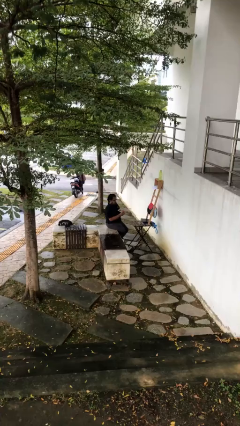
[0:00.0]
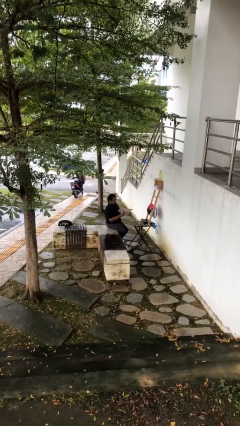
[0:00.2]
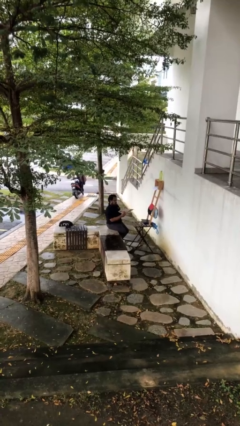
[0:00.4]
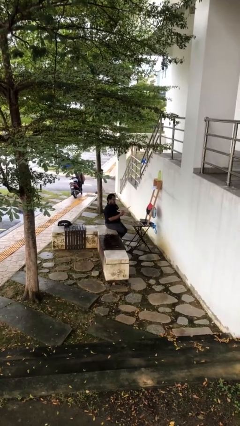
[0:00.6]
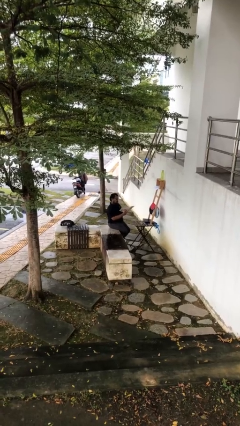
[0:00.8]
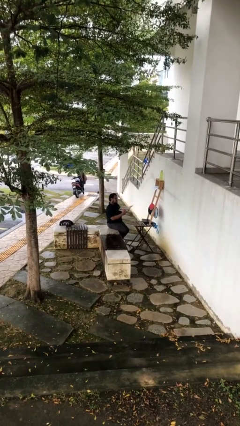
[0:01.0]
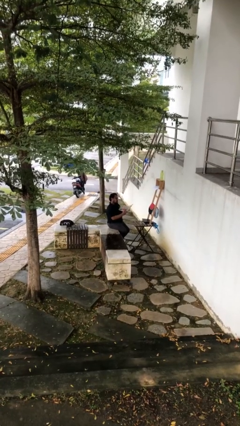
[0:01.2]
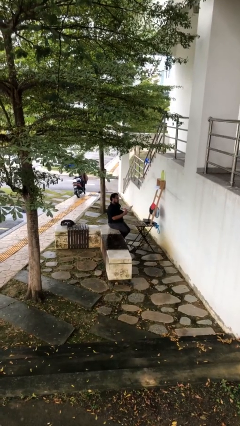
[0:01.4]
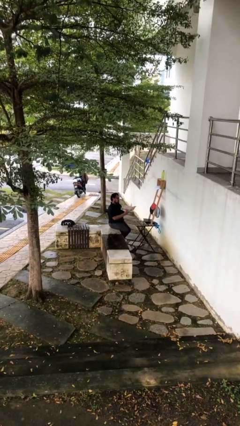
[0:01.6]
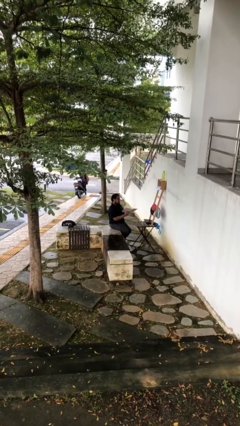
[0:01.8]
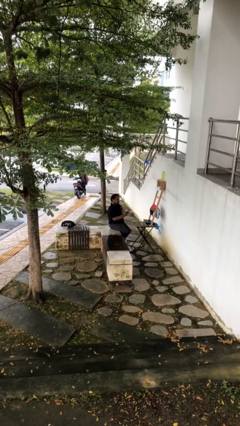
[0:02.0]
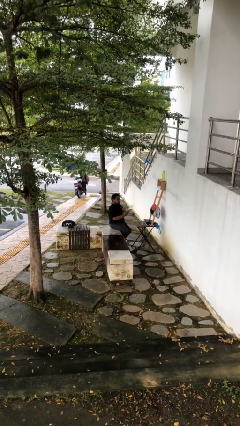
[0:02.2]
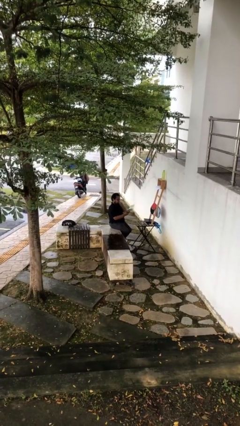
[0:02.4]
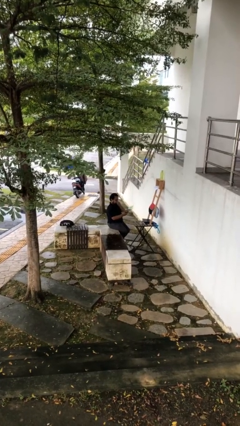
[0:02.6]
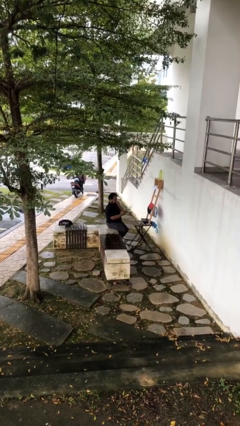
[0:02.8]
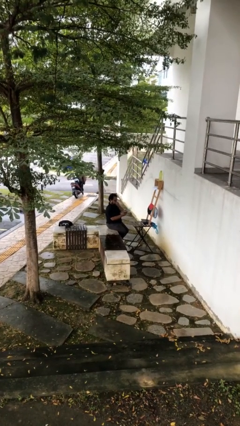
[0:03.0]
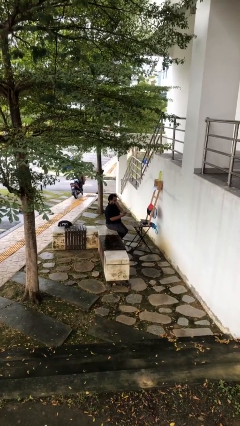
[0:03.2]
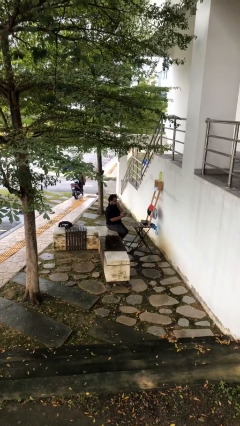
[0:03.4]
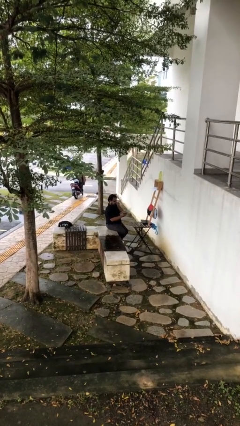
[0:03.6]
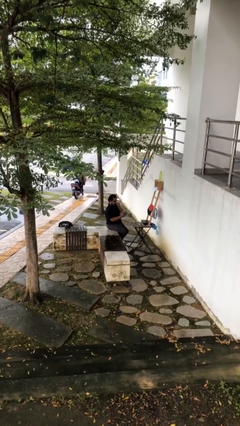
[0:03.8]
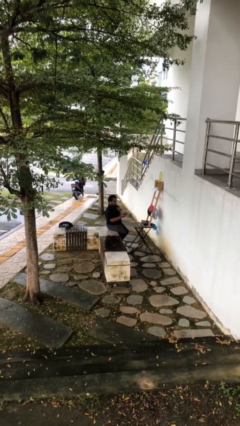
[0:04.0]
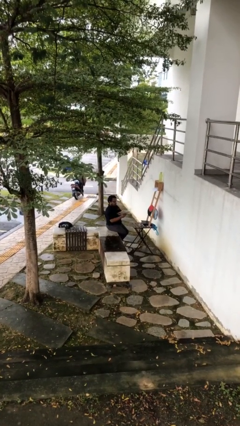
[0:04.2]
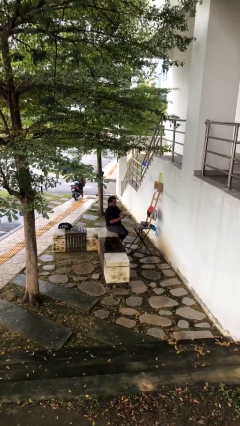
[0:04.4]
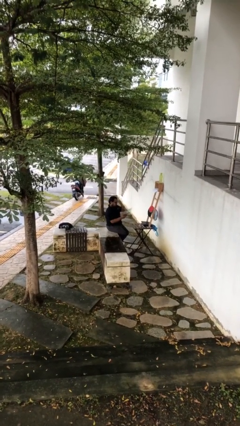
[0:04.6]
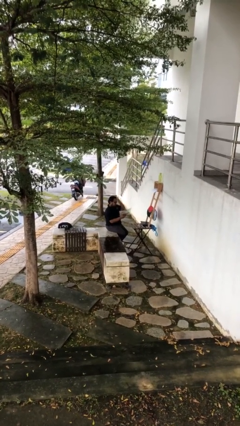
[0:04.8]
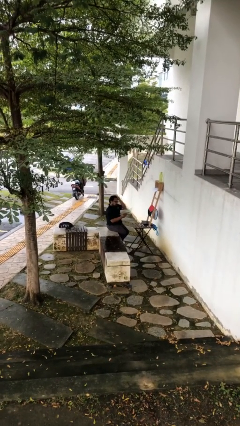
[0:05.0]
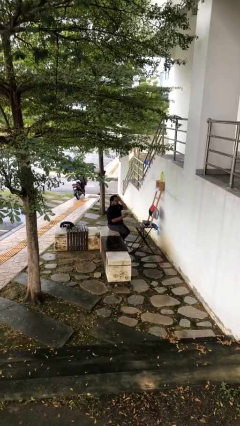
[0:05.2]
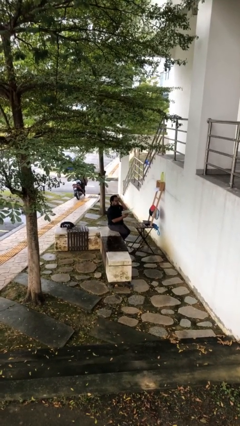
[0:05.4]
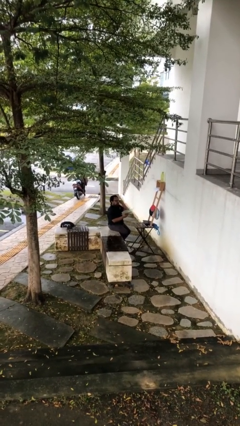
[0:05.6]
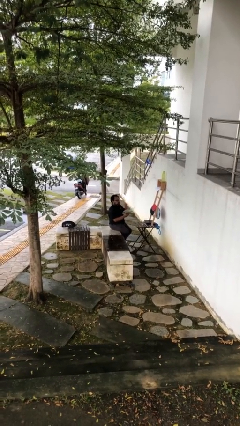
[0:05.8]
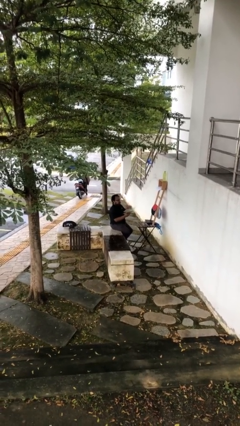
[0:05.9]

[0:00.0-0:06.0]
person reads document

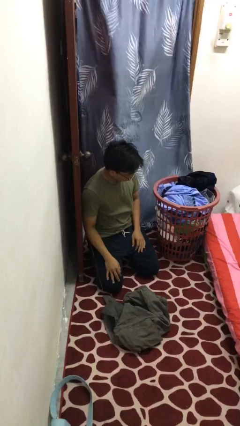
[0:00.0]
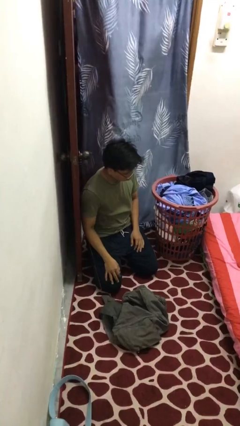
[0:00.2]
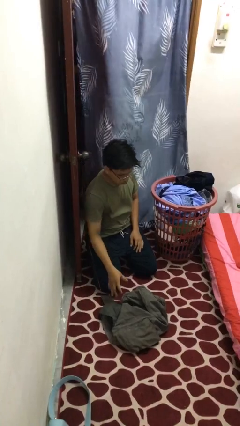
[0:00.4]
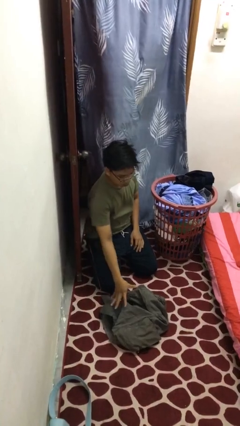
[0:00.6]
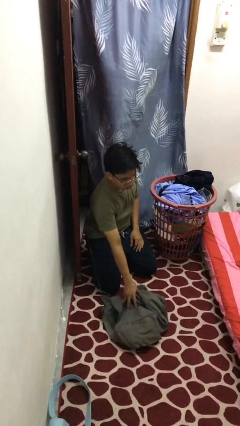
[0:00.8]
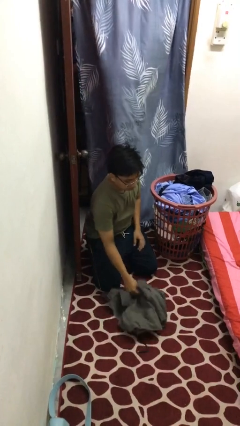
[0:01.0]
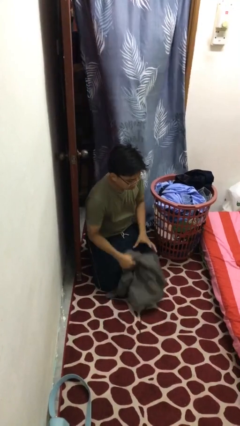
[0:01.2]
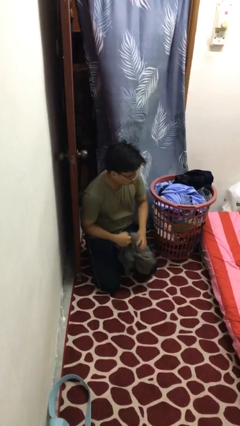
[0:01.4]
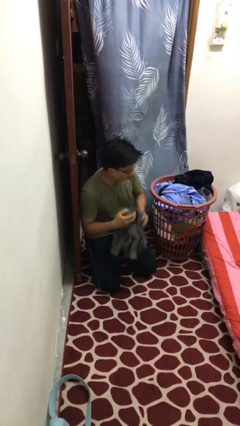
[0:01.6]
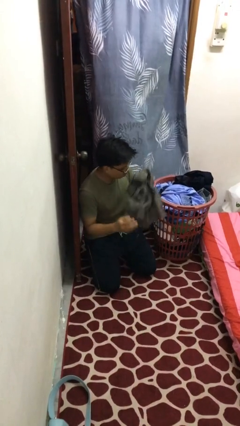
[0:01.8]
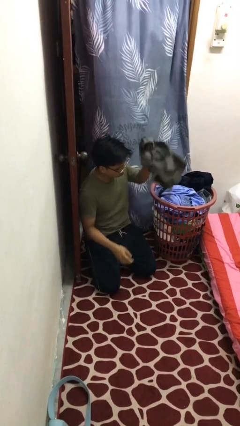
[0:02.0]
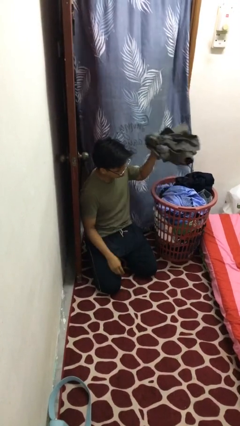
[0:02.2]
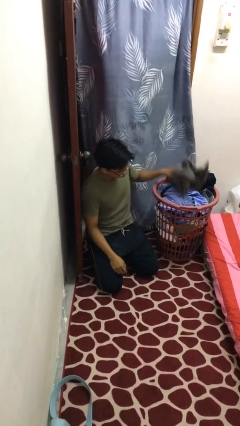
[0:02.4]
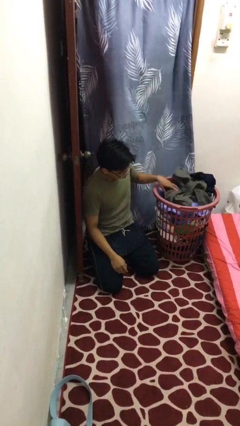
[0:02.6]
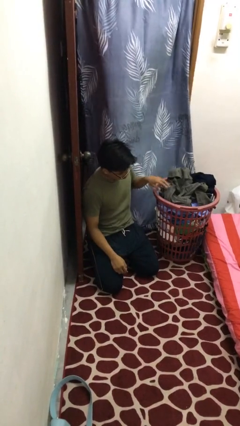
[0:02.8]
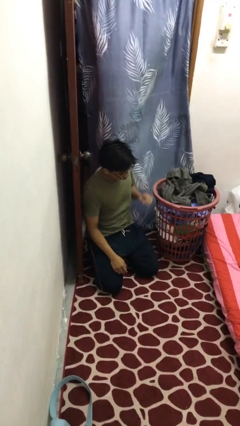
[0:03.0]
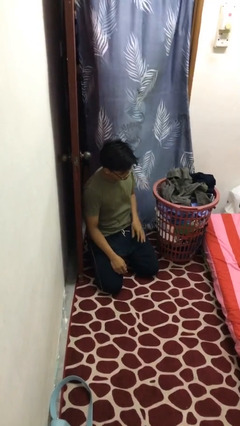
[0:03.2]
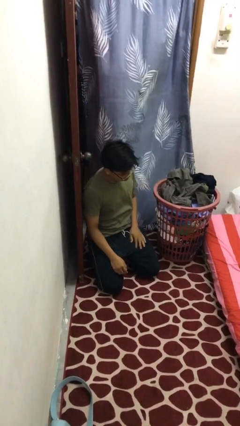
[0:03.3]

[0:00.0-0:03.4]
person puts object into basket

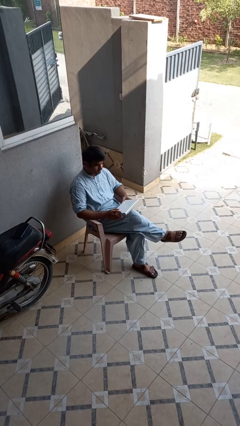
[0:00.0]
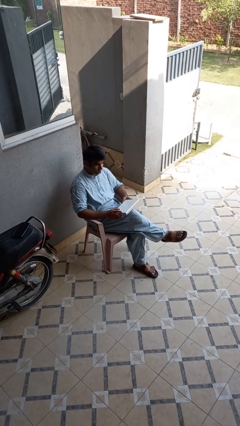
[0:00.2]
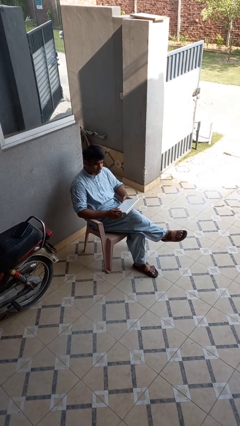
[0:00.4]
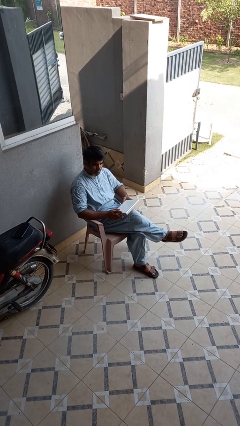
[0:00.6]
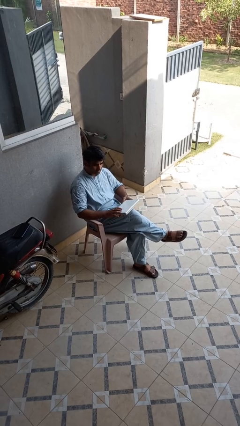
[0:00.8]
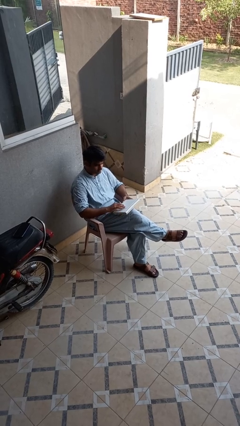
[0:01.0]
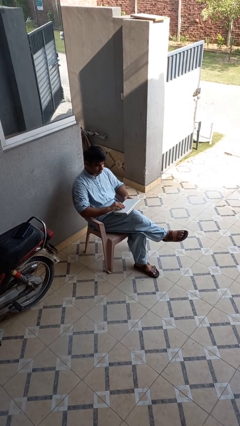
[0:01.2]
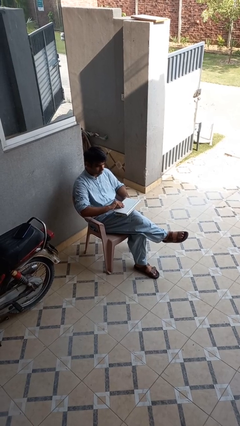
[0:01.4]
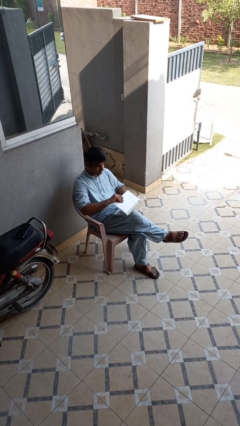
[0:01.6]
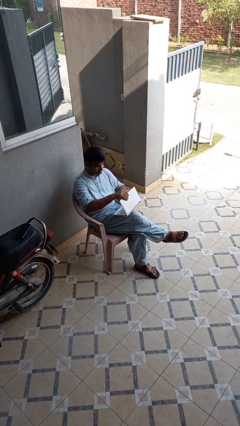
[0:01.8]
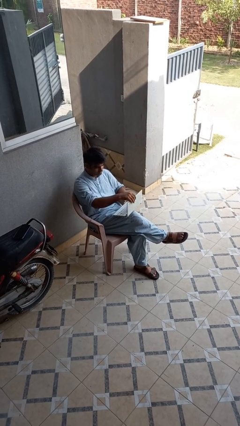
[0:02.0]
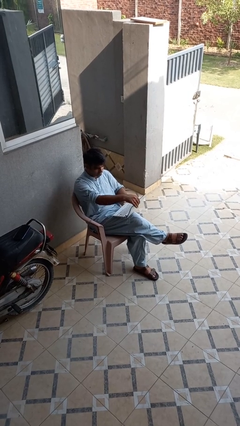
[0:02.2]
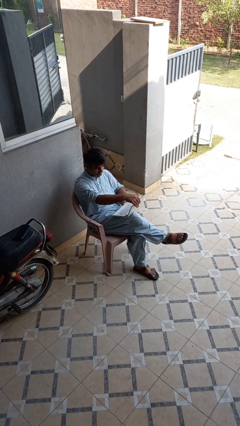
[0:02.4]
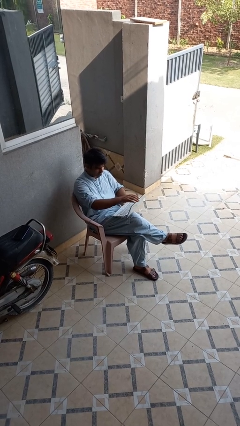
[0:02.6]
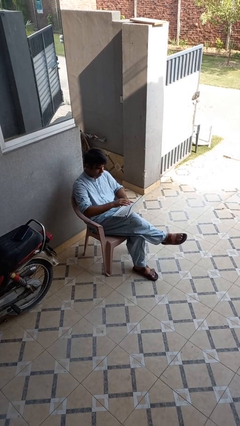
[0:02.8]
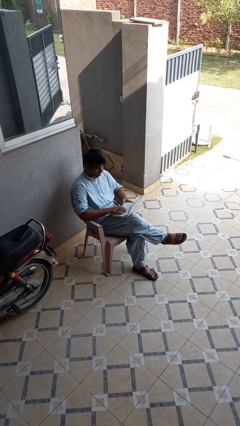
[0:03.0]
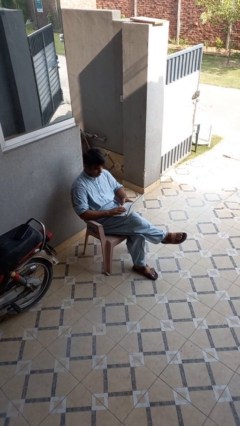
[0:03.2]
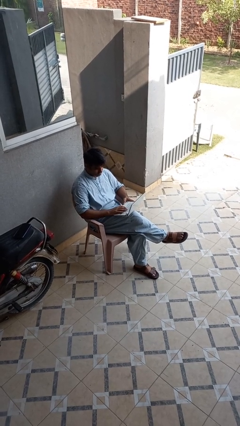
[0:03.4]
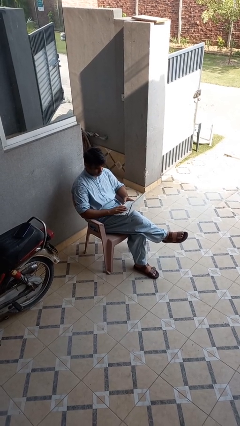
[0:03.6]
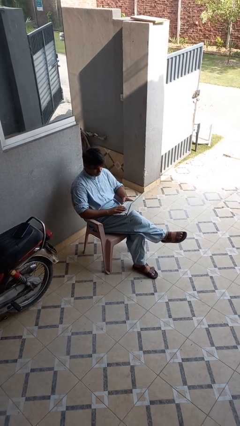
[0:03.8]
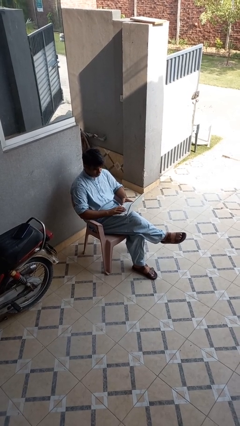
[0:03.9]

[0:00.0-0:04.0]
person opens laptop

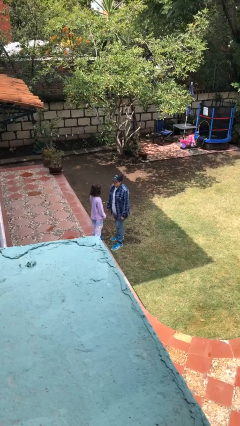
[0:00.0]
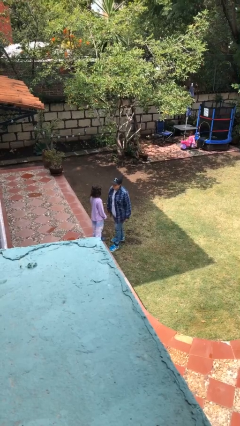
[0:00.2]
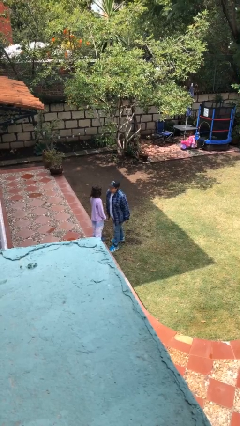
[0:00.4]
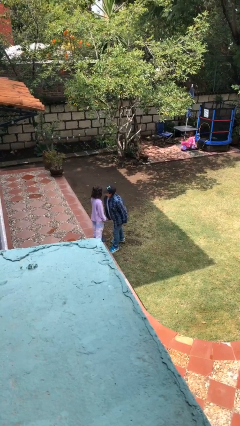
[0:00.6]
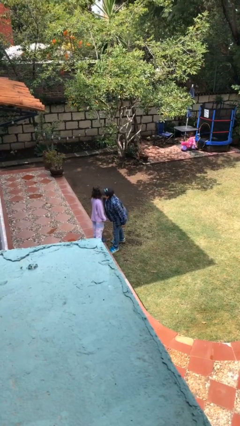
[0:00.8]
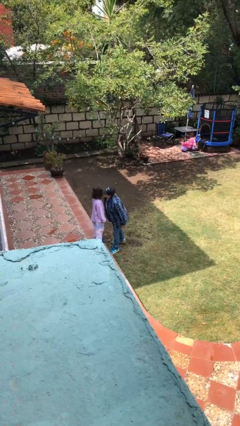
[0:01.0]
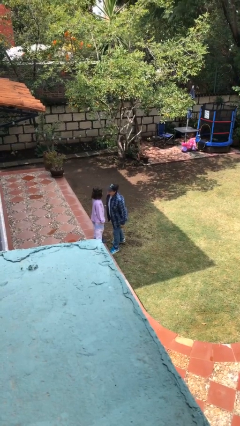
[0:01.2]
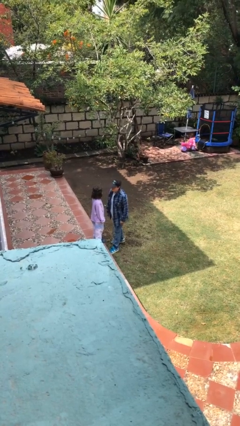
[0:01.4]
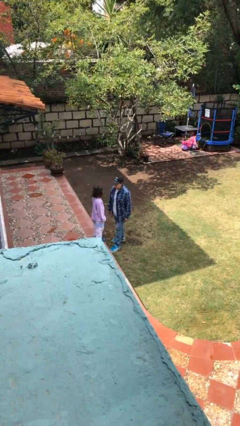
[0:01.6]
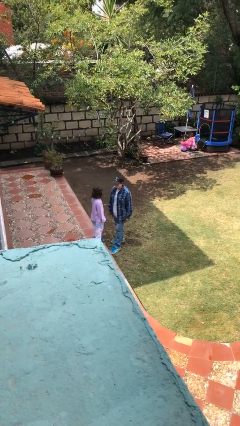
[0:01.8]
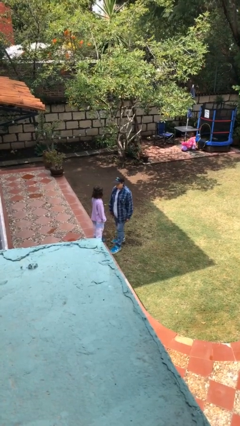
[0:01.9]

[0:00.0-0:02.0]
person kisses cheek of person

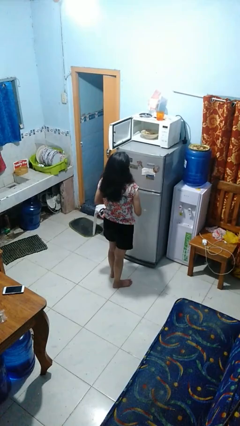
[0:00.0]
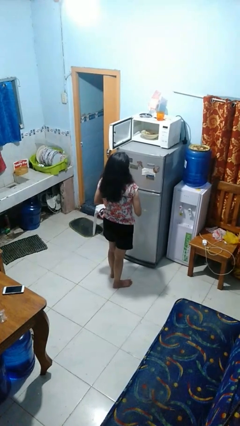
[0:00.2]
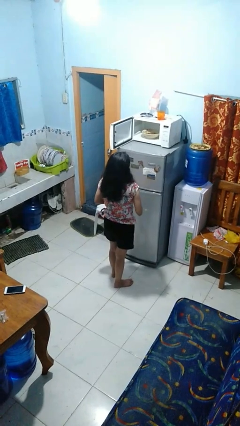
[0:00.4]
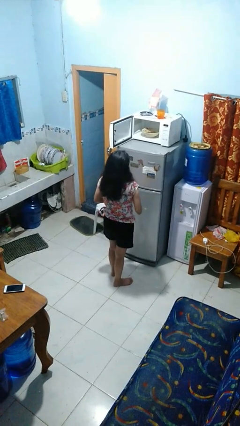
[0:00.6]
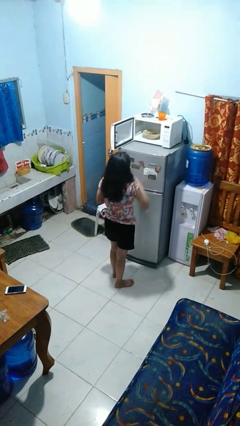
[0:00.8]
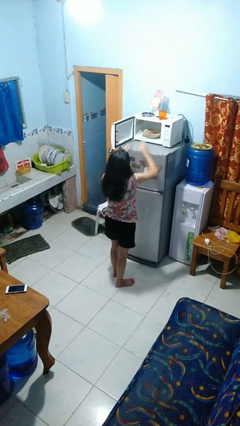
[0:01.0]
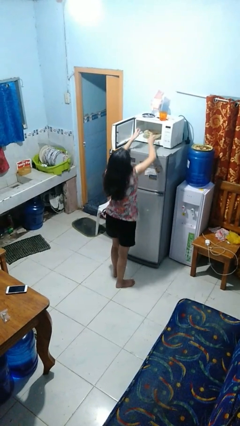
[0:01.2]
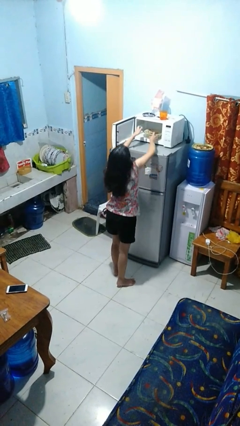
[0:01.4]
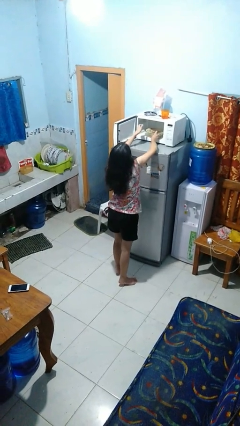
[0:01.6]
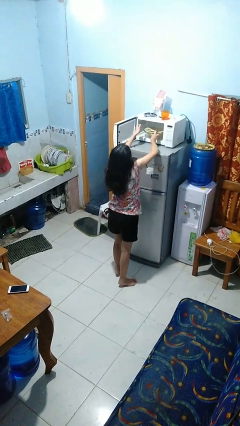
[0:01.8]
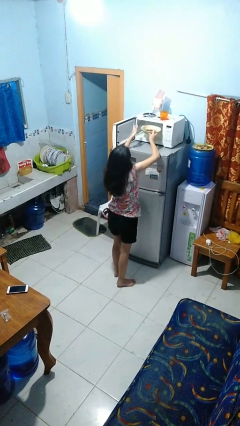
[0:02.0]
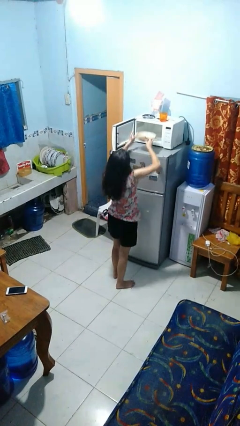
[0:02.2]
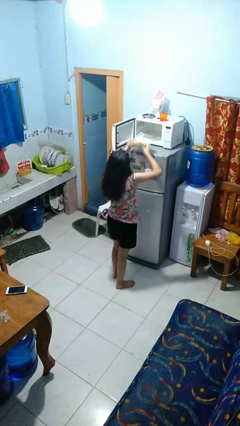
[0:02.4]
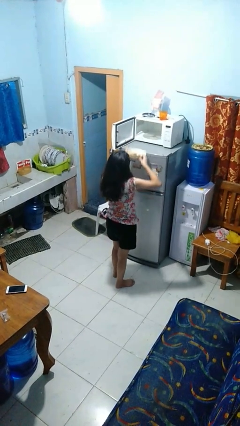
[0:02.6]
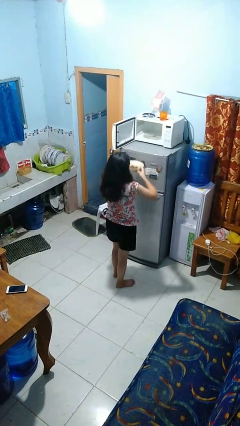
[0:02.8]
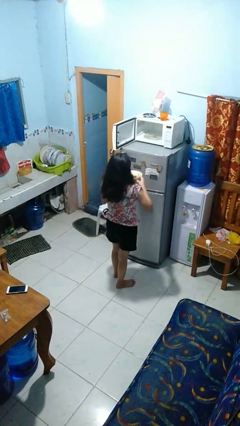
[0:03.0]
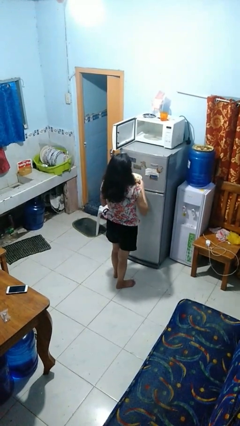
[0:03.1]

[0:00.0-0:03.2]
person takes object from microwave
